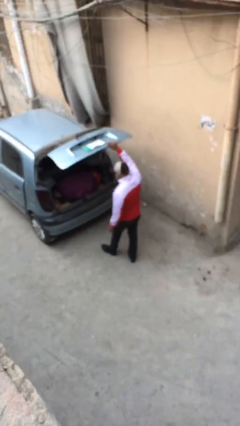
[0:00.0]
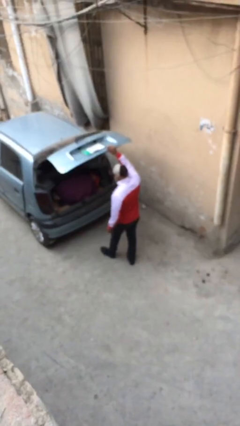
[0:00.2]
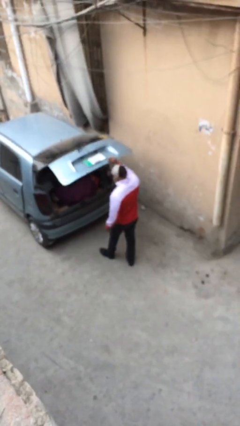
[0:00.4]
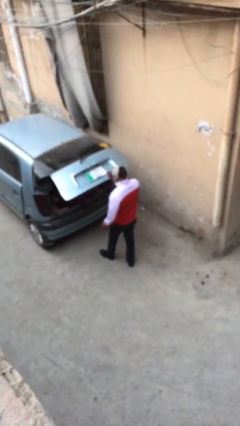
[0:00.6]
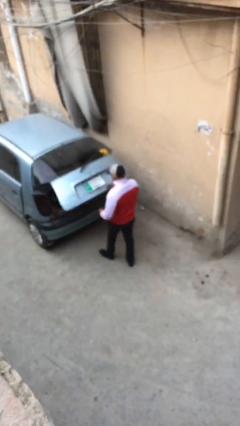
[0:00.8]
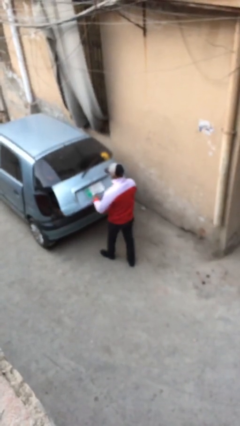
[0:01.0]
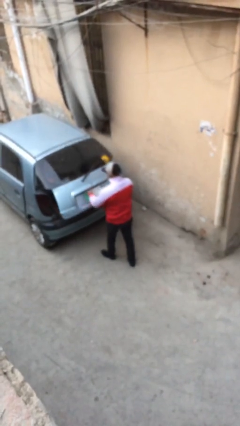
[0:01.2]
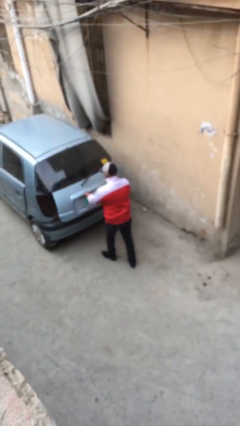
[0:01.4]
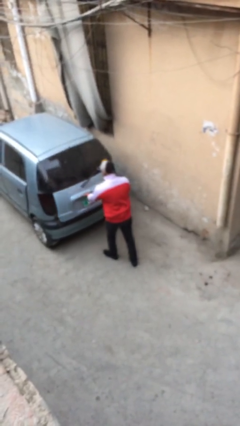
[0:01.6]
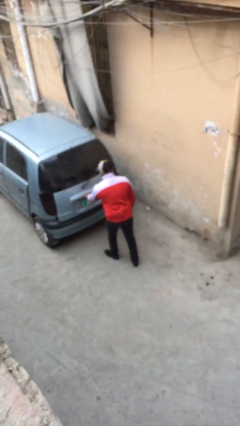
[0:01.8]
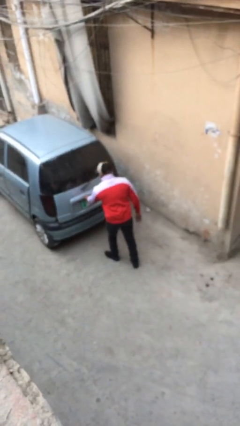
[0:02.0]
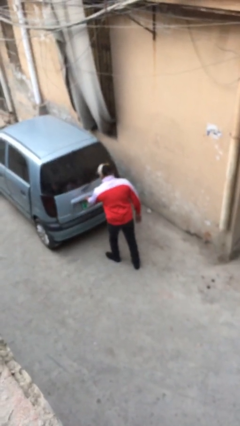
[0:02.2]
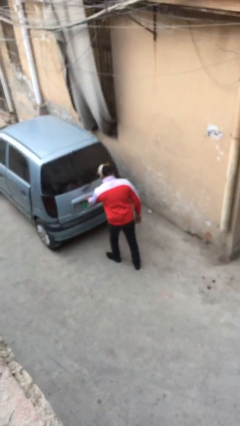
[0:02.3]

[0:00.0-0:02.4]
person closes car trunk

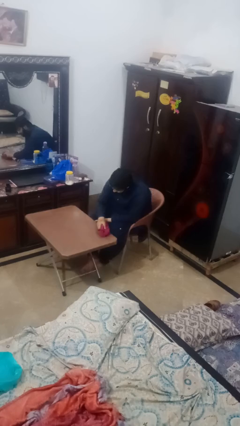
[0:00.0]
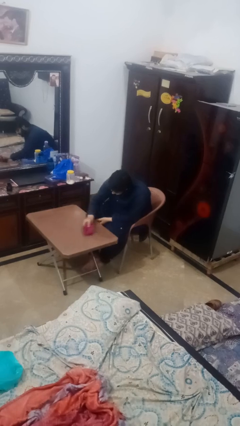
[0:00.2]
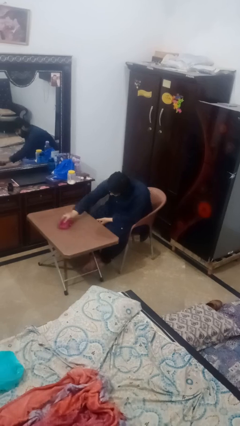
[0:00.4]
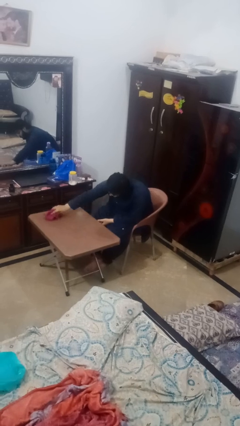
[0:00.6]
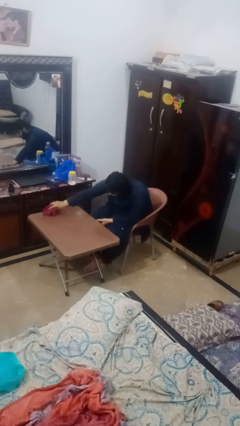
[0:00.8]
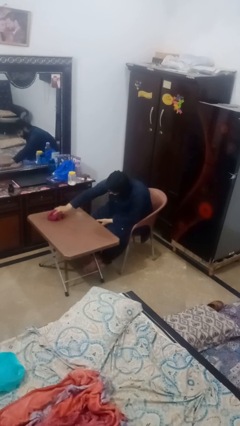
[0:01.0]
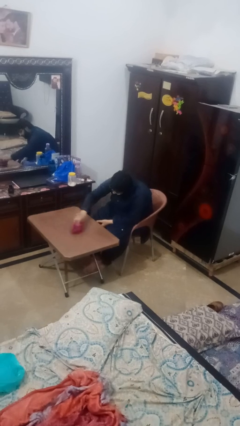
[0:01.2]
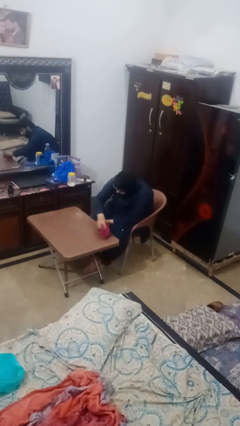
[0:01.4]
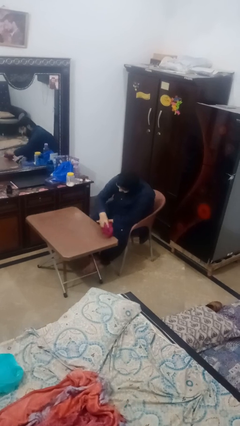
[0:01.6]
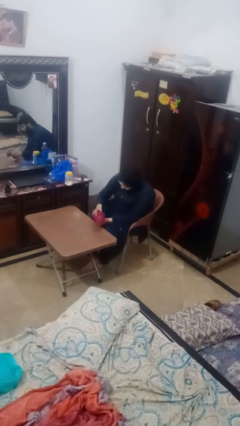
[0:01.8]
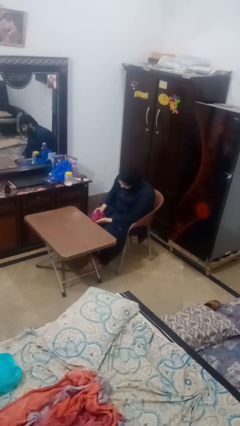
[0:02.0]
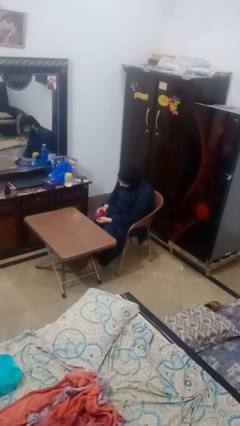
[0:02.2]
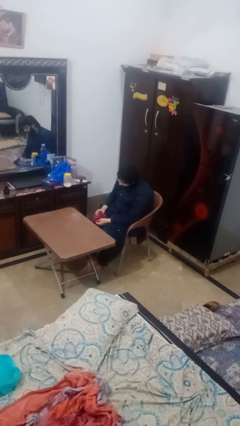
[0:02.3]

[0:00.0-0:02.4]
person cleans table with rag

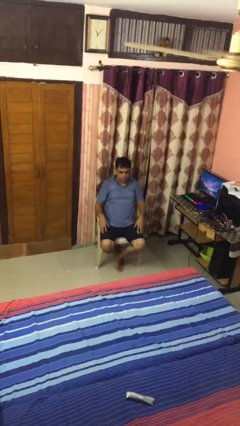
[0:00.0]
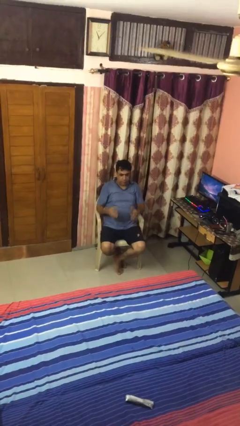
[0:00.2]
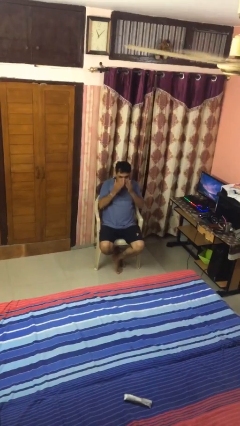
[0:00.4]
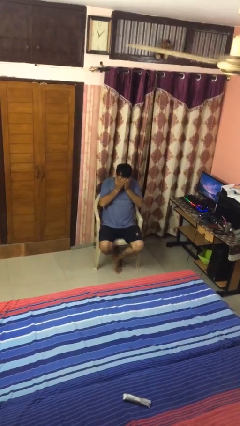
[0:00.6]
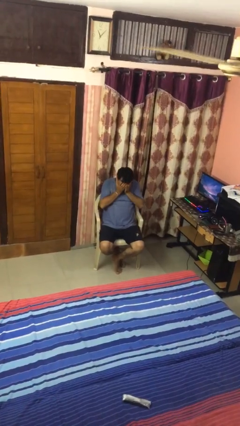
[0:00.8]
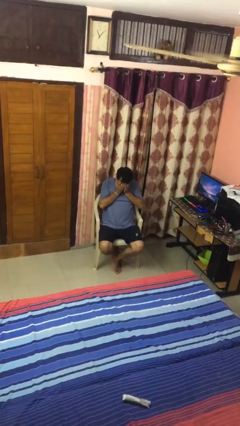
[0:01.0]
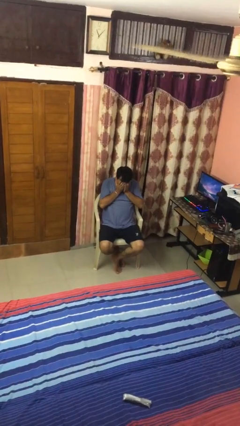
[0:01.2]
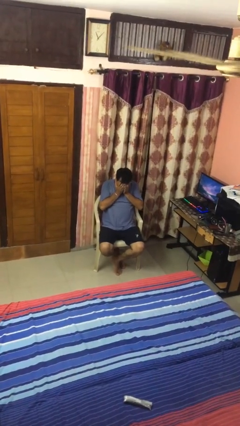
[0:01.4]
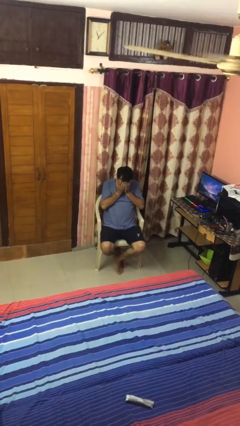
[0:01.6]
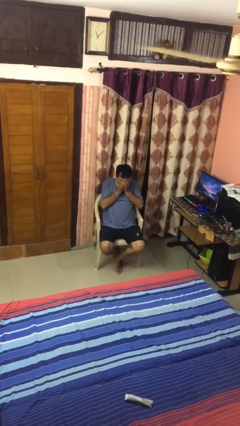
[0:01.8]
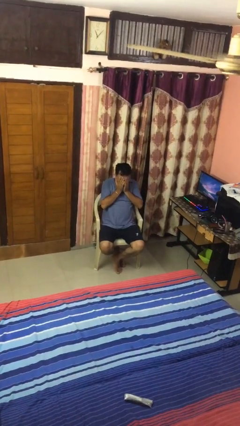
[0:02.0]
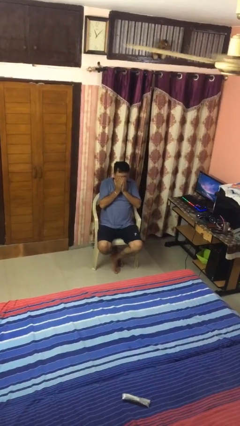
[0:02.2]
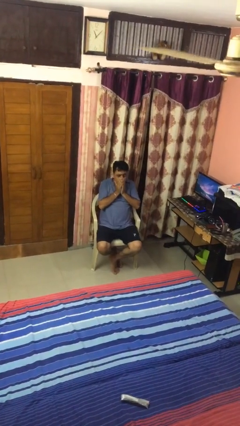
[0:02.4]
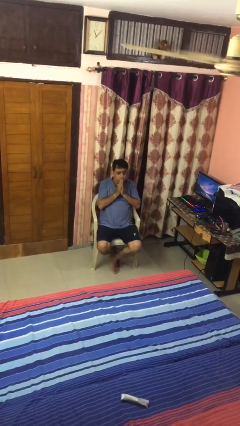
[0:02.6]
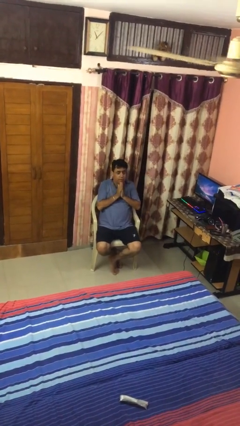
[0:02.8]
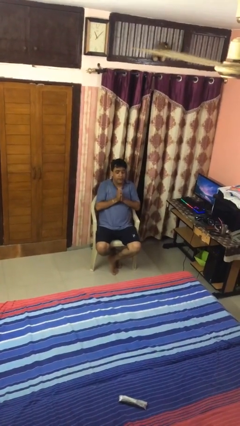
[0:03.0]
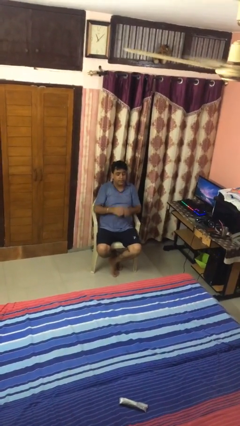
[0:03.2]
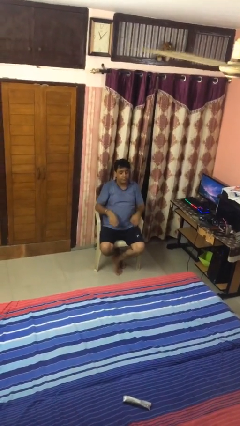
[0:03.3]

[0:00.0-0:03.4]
person covers face with hands

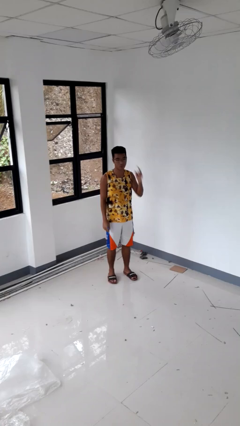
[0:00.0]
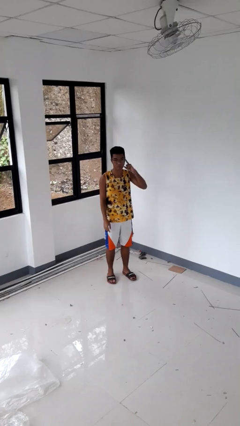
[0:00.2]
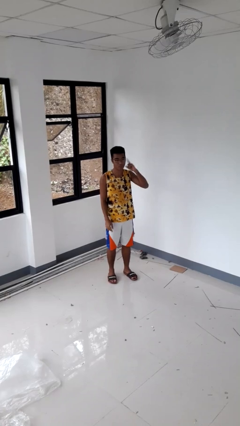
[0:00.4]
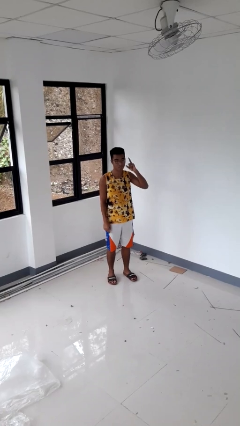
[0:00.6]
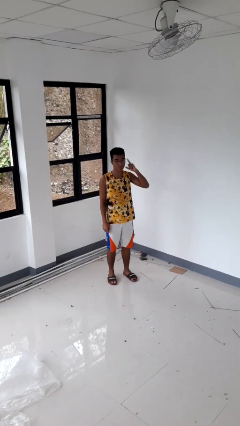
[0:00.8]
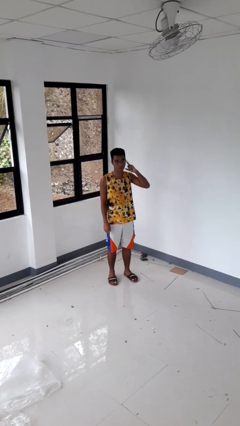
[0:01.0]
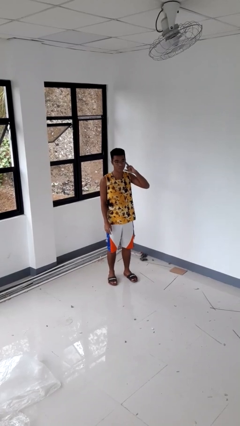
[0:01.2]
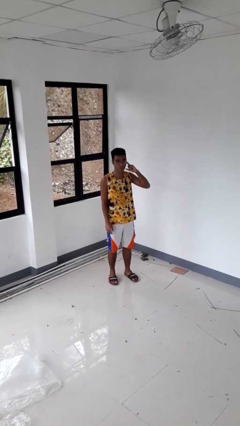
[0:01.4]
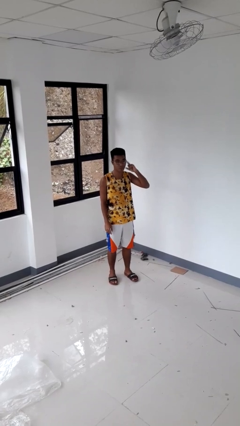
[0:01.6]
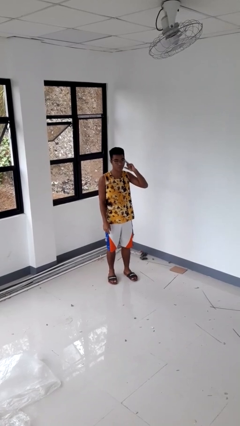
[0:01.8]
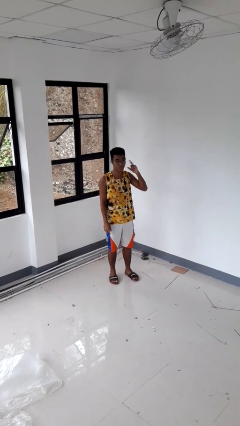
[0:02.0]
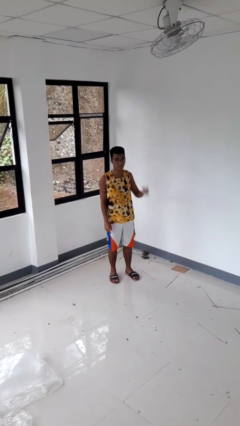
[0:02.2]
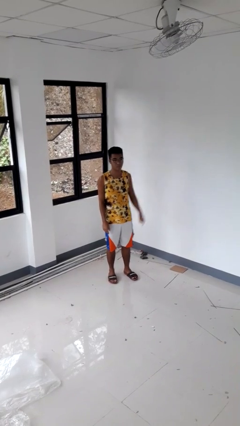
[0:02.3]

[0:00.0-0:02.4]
person gestures listen closely

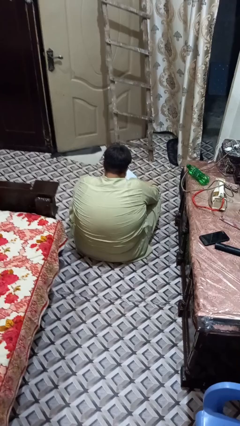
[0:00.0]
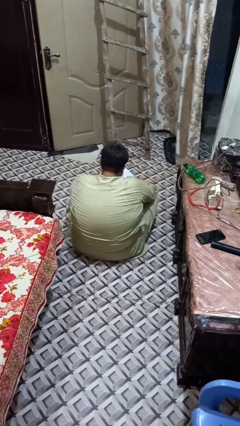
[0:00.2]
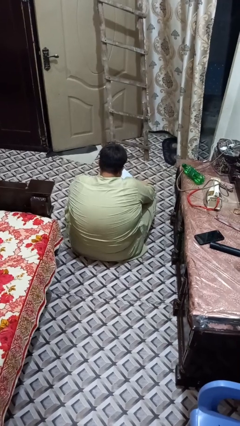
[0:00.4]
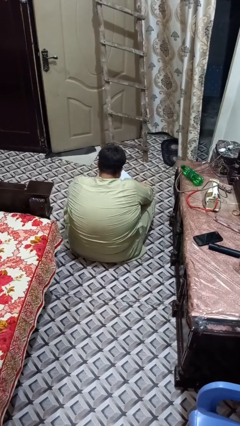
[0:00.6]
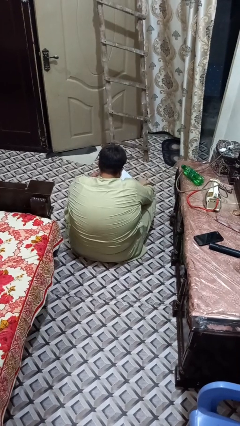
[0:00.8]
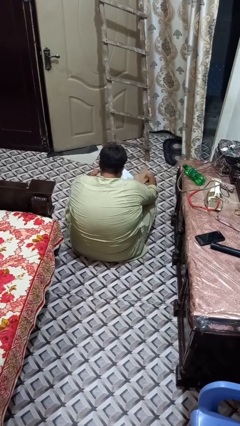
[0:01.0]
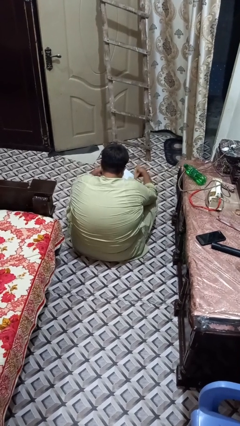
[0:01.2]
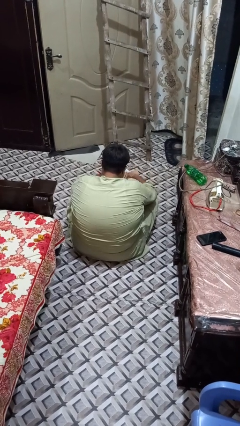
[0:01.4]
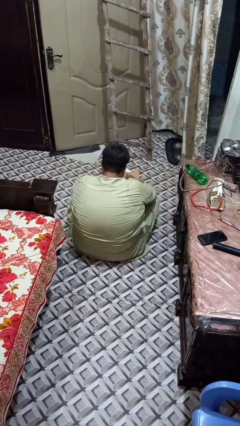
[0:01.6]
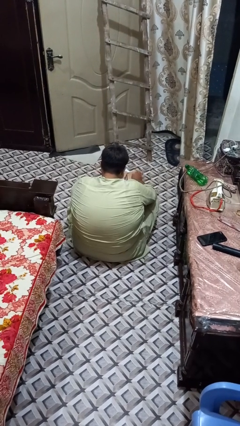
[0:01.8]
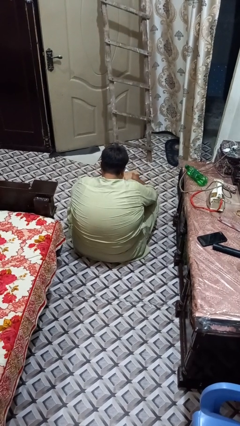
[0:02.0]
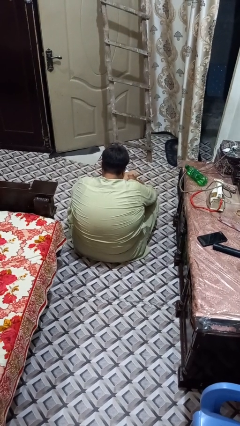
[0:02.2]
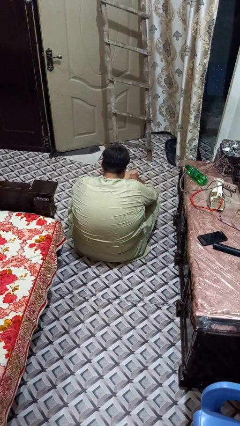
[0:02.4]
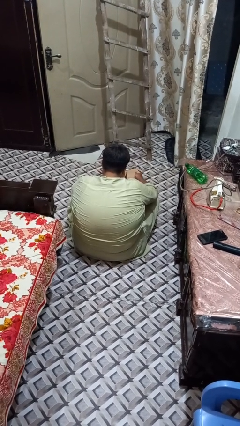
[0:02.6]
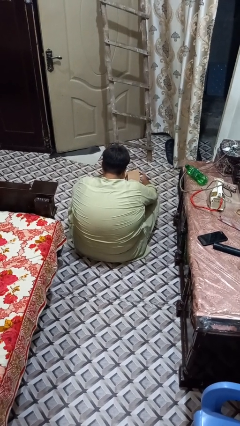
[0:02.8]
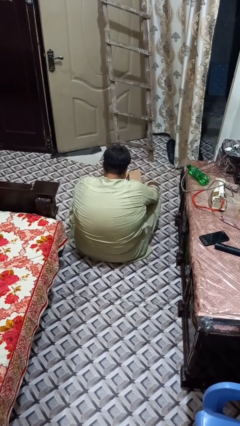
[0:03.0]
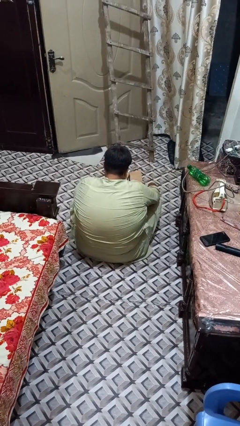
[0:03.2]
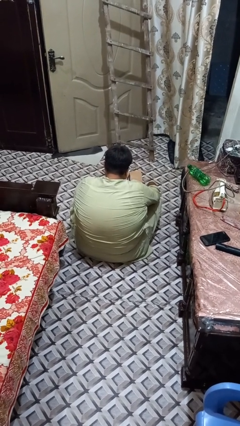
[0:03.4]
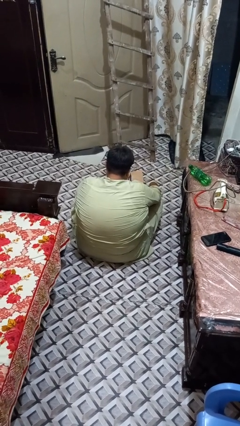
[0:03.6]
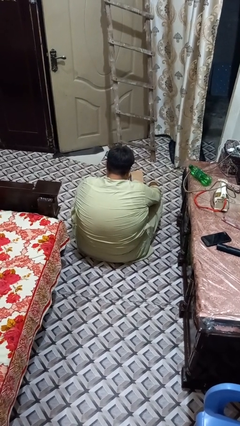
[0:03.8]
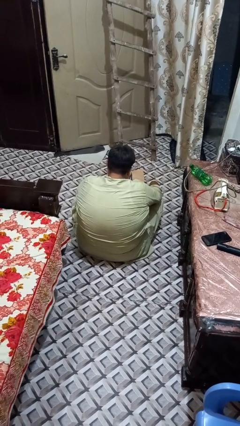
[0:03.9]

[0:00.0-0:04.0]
person closes box

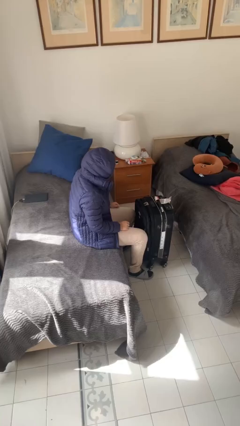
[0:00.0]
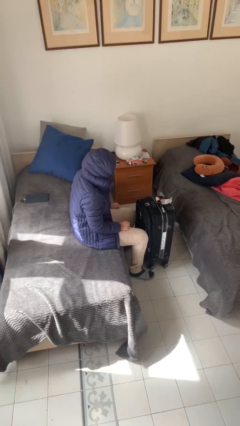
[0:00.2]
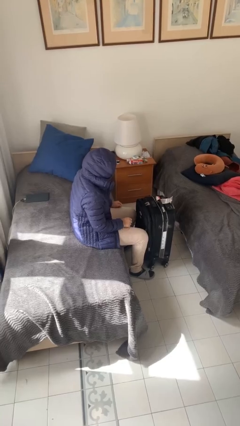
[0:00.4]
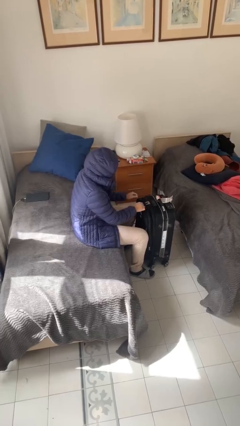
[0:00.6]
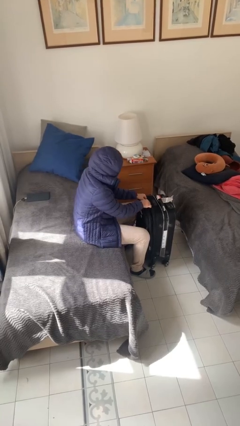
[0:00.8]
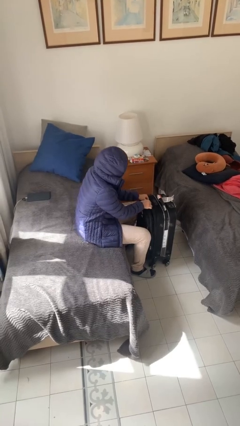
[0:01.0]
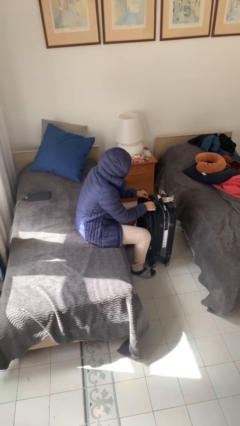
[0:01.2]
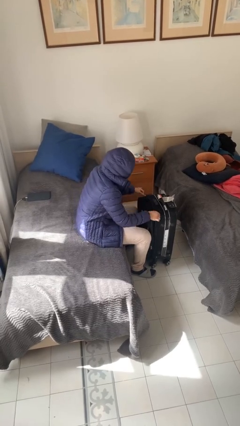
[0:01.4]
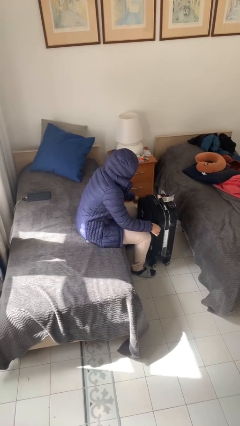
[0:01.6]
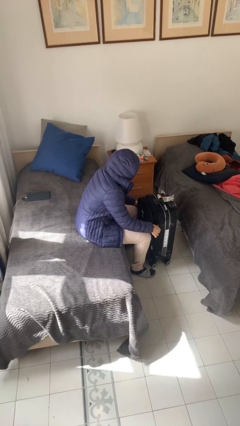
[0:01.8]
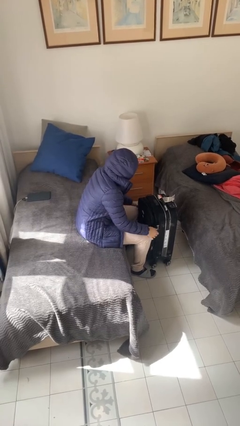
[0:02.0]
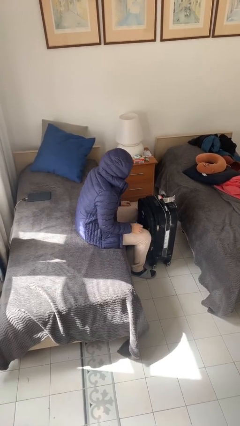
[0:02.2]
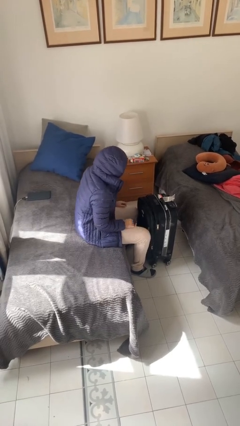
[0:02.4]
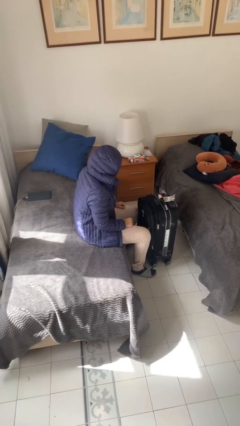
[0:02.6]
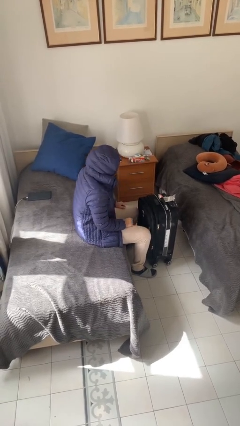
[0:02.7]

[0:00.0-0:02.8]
person opens suitcase
